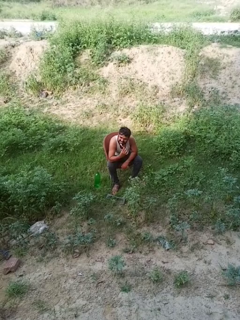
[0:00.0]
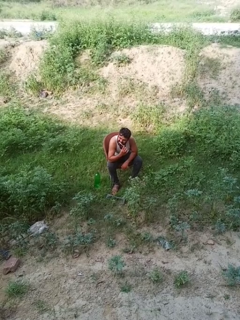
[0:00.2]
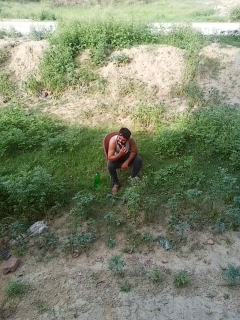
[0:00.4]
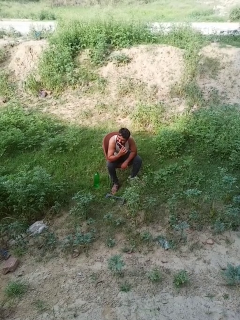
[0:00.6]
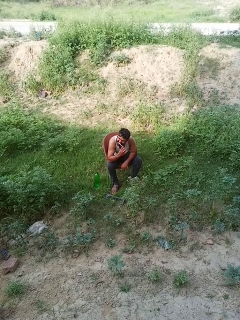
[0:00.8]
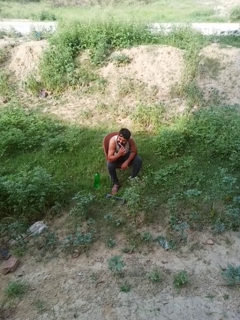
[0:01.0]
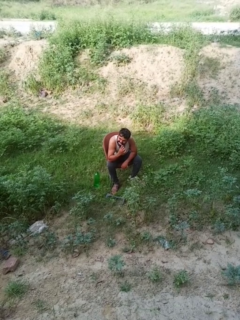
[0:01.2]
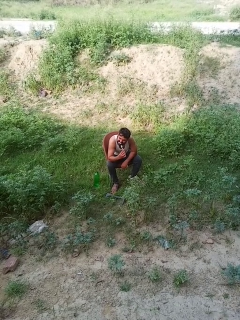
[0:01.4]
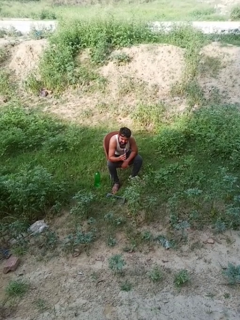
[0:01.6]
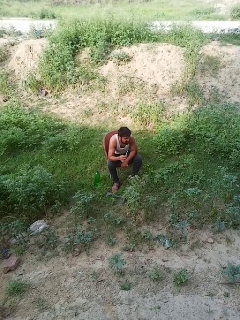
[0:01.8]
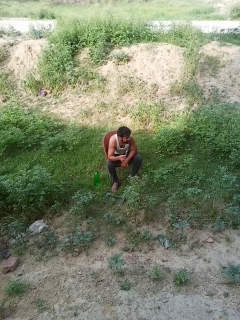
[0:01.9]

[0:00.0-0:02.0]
person brushes teeth

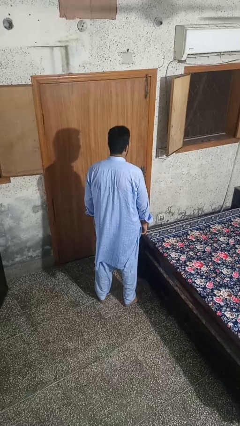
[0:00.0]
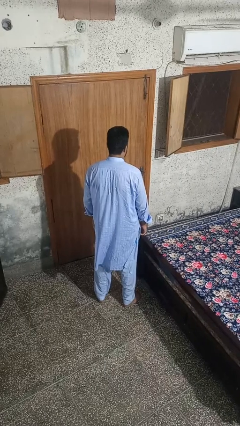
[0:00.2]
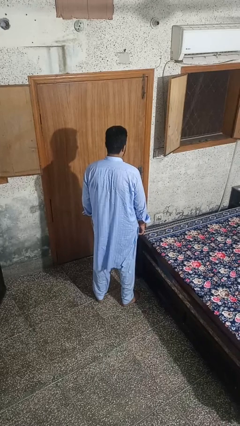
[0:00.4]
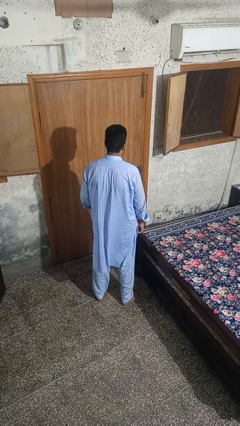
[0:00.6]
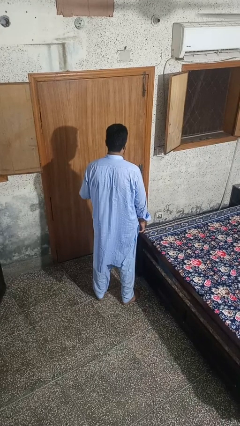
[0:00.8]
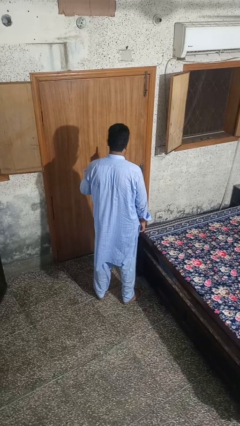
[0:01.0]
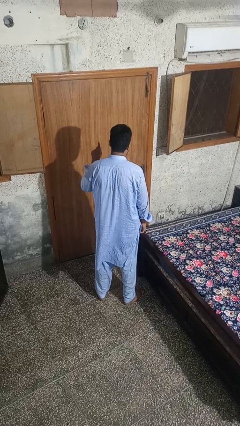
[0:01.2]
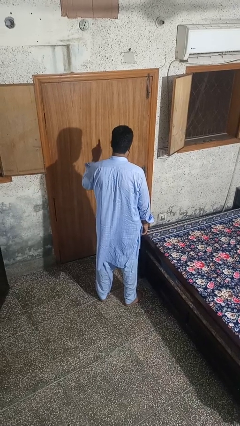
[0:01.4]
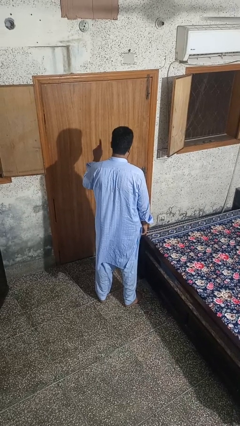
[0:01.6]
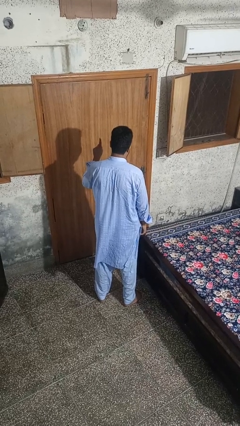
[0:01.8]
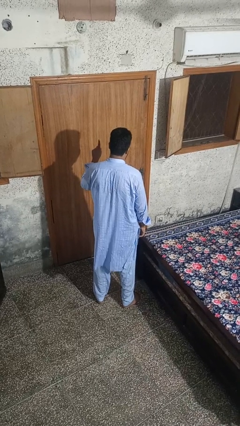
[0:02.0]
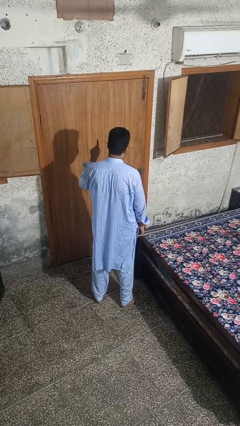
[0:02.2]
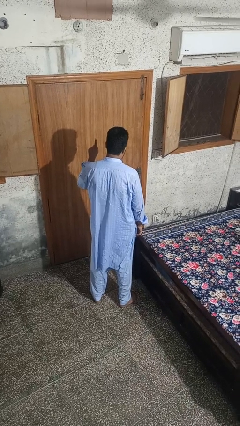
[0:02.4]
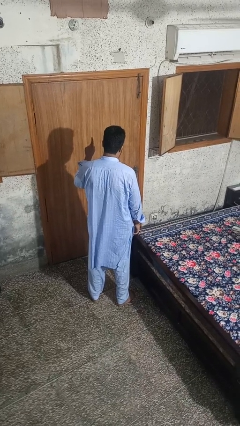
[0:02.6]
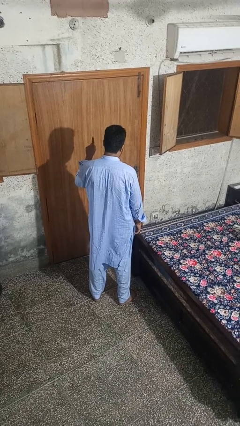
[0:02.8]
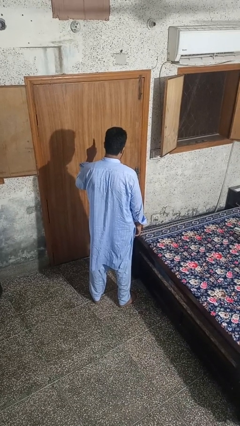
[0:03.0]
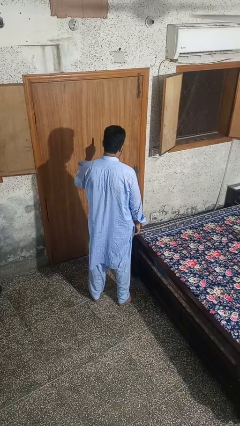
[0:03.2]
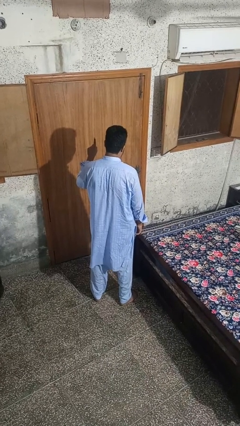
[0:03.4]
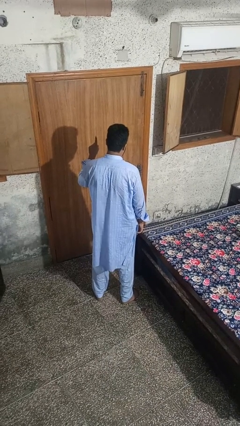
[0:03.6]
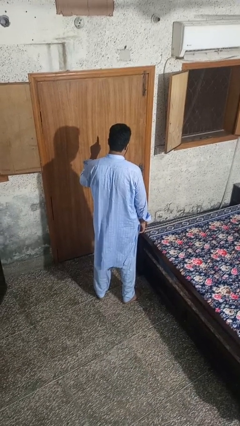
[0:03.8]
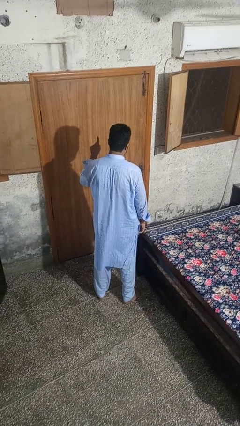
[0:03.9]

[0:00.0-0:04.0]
person gestures number one

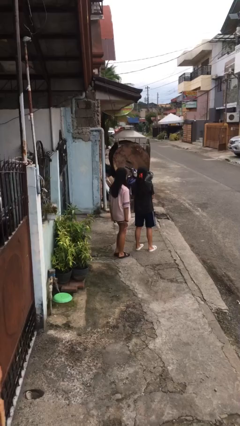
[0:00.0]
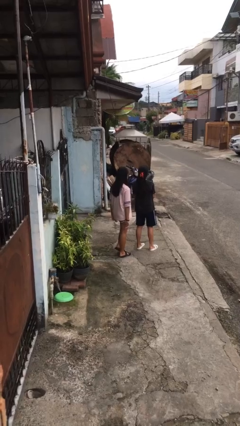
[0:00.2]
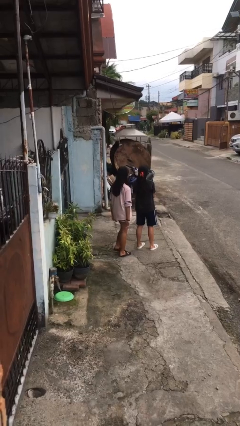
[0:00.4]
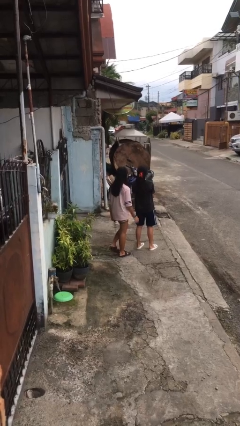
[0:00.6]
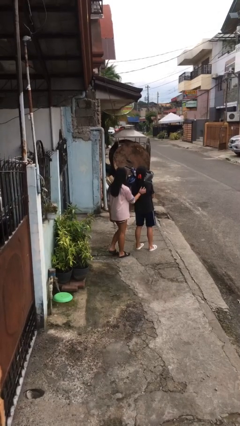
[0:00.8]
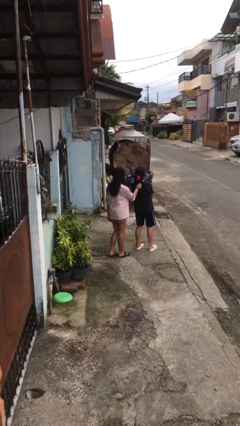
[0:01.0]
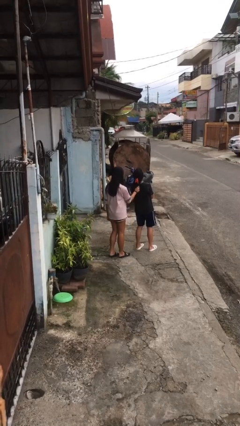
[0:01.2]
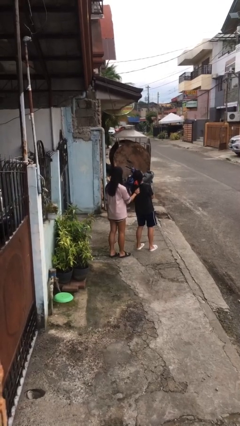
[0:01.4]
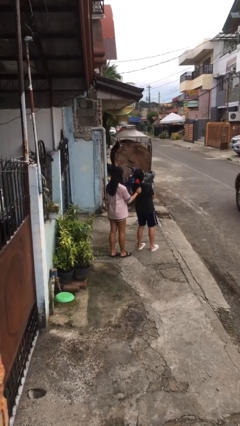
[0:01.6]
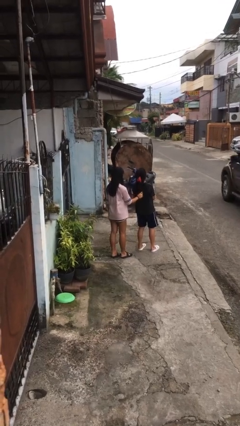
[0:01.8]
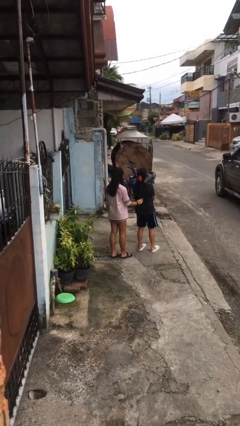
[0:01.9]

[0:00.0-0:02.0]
person grabs person by hair

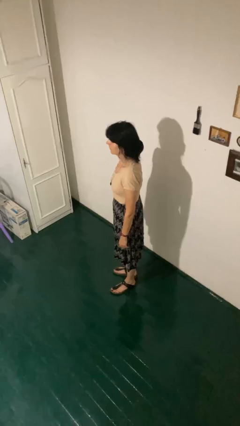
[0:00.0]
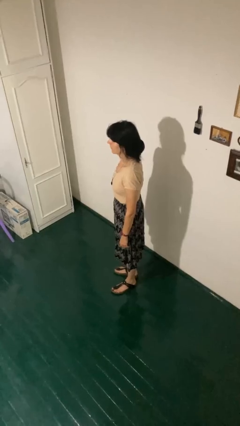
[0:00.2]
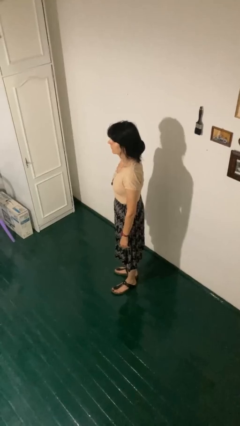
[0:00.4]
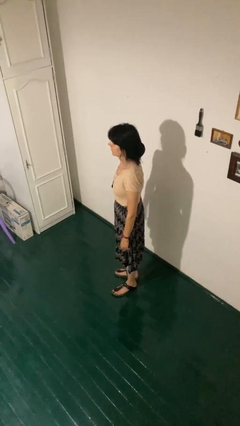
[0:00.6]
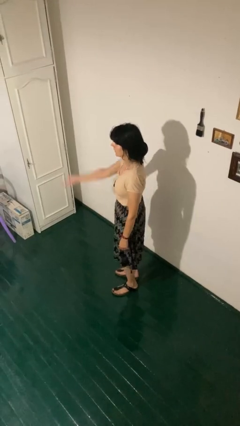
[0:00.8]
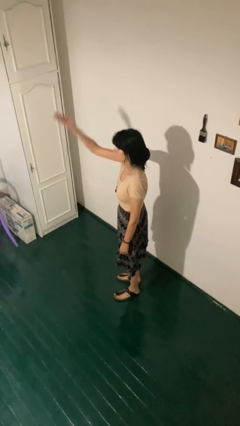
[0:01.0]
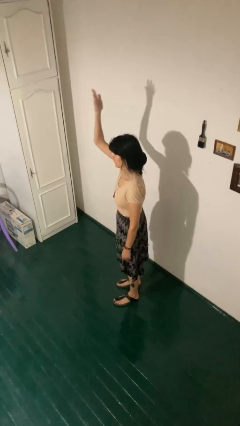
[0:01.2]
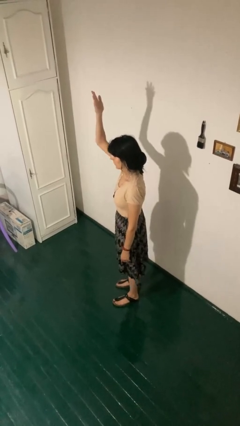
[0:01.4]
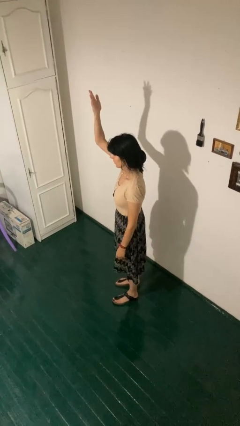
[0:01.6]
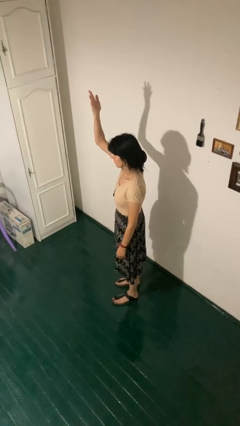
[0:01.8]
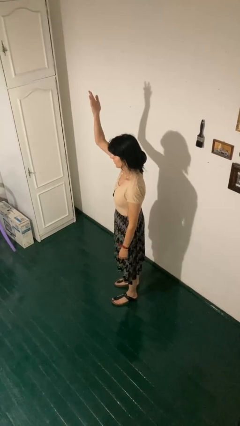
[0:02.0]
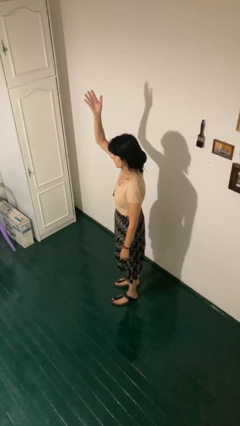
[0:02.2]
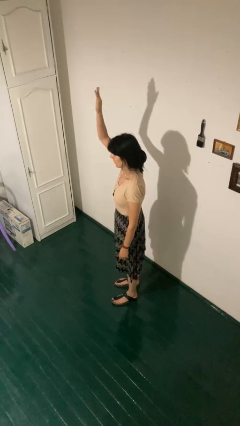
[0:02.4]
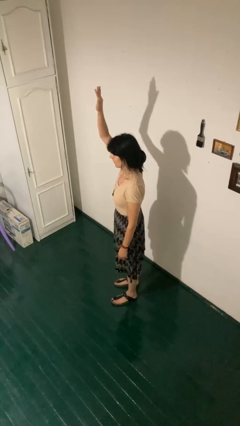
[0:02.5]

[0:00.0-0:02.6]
person gestures swipe up

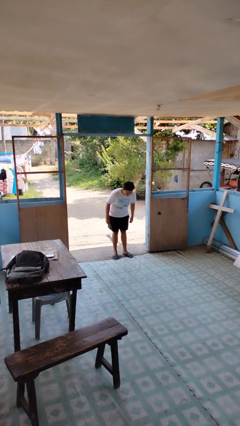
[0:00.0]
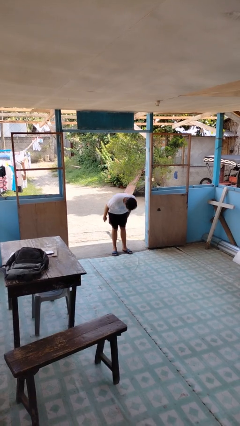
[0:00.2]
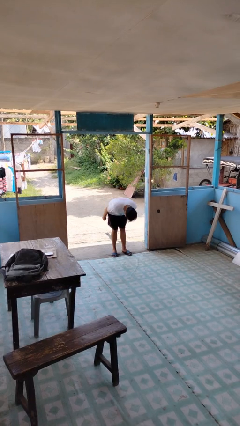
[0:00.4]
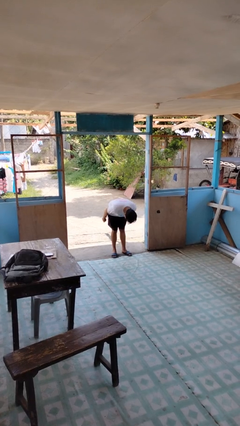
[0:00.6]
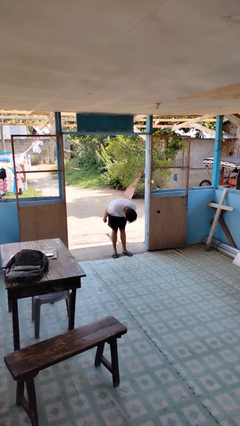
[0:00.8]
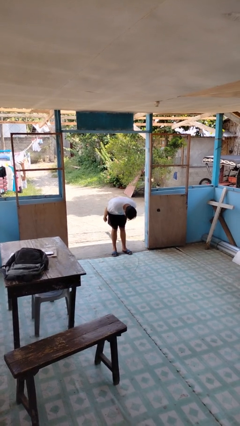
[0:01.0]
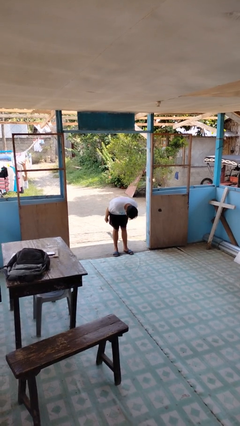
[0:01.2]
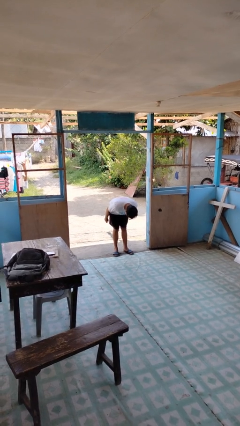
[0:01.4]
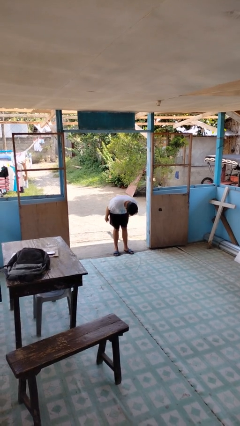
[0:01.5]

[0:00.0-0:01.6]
person bows

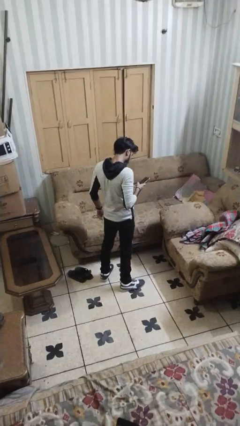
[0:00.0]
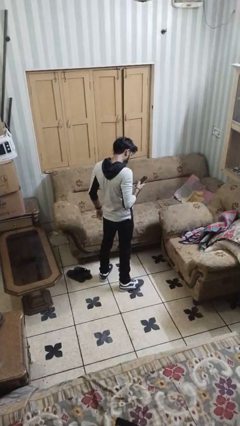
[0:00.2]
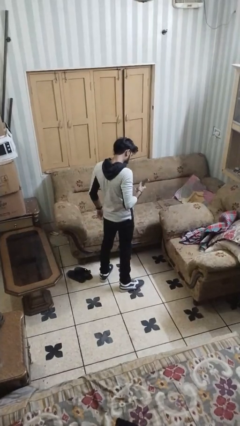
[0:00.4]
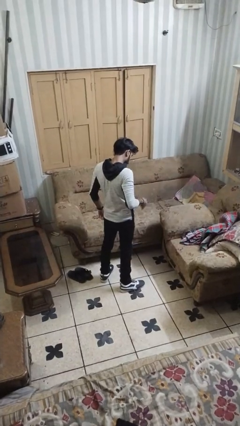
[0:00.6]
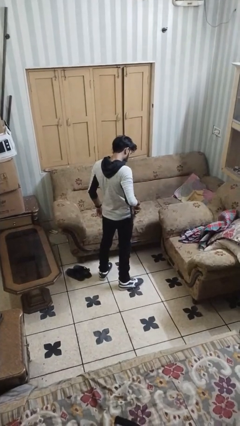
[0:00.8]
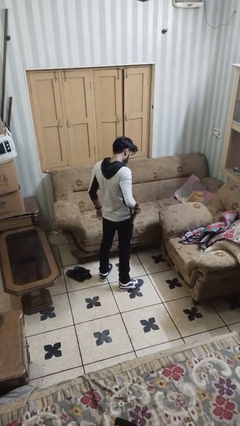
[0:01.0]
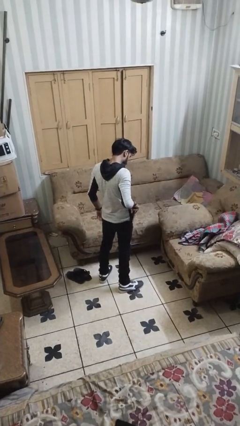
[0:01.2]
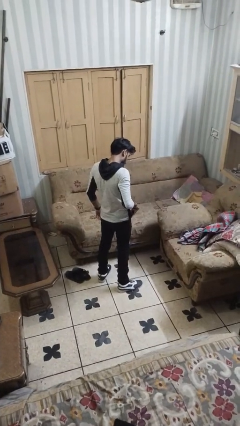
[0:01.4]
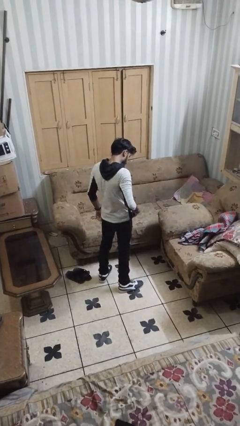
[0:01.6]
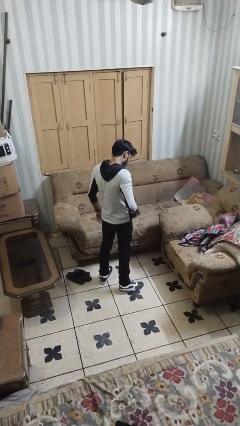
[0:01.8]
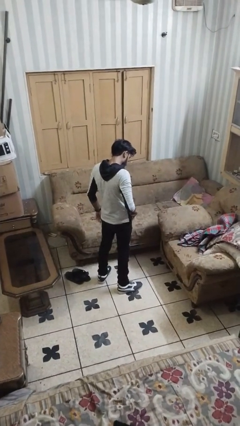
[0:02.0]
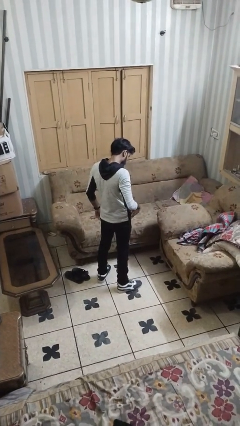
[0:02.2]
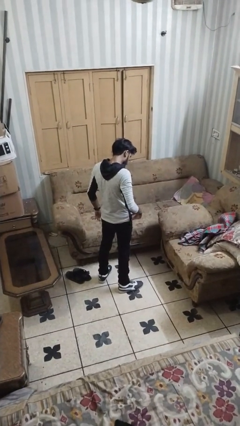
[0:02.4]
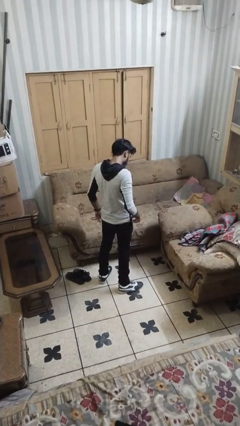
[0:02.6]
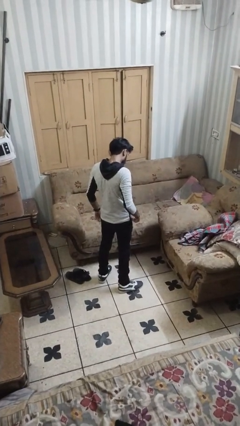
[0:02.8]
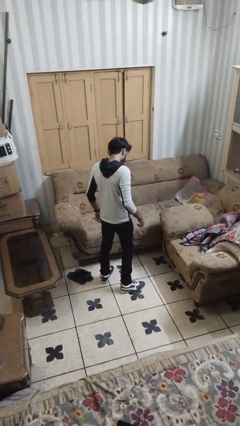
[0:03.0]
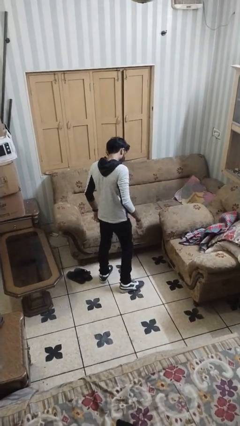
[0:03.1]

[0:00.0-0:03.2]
person puts phone into pocket

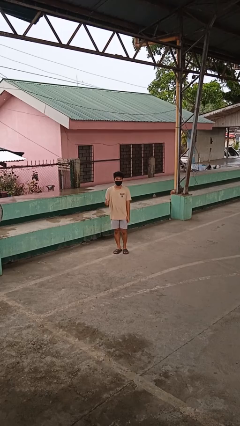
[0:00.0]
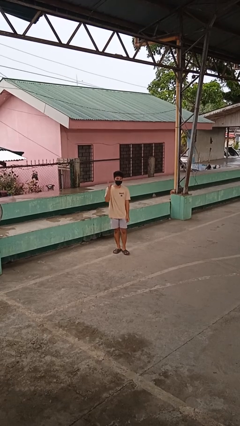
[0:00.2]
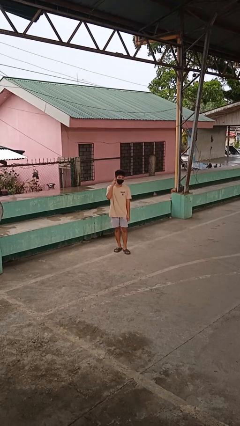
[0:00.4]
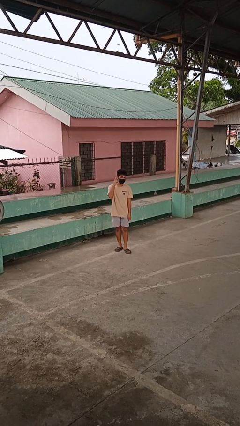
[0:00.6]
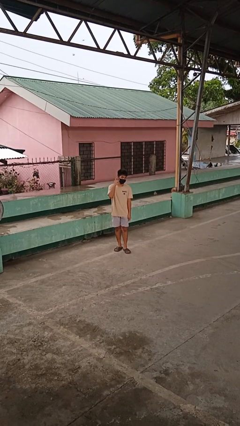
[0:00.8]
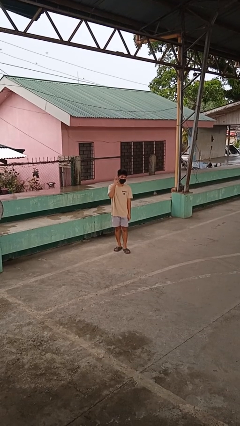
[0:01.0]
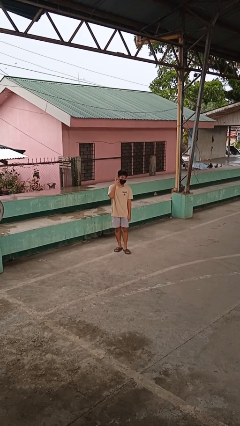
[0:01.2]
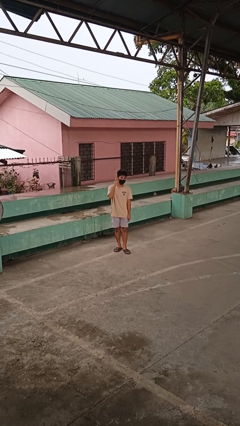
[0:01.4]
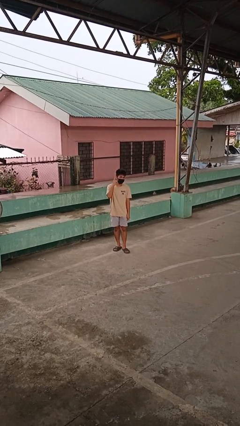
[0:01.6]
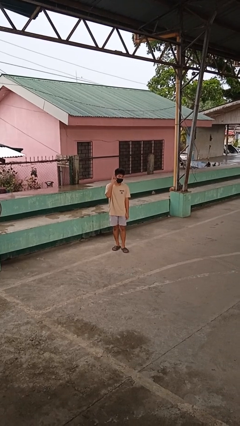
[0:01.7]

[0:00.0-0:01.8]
person gestures listen closely

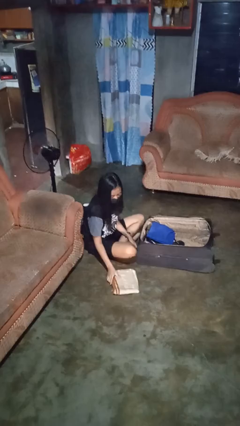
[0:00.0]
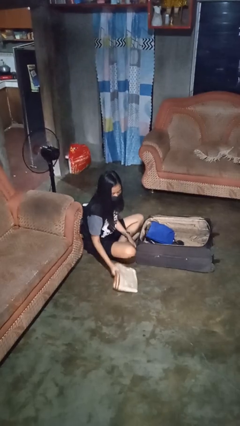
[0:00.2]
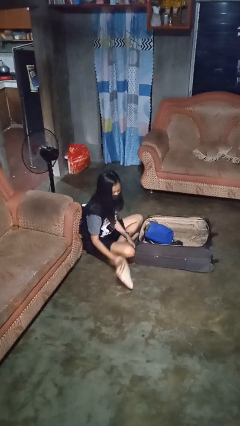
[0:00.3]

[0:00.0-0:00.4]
person loads clothes into suitcase

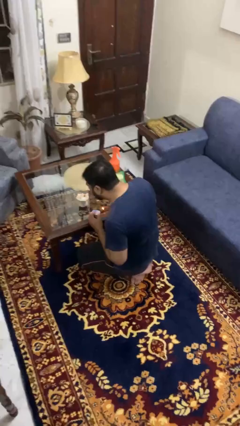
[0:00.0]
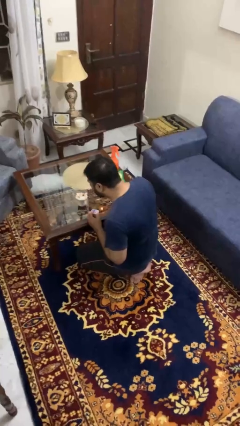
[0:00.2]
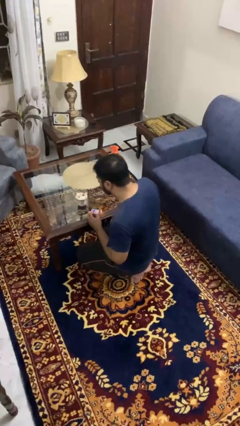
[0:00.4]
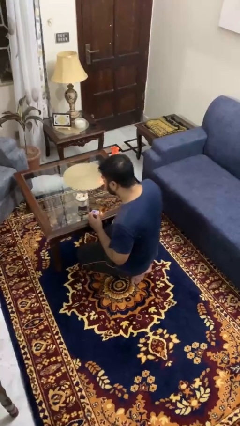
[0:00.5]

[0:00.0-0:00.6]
person extinguishes candle
